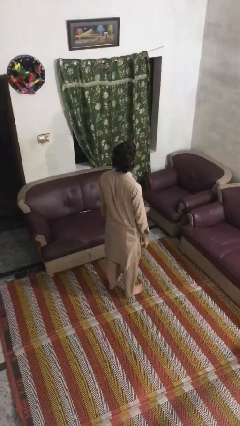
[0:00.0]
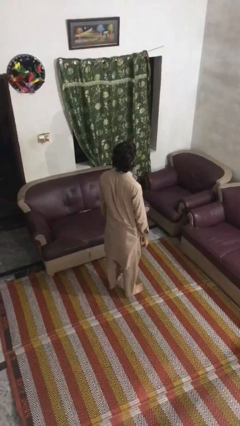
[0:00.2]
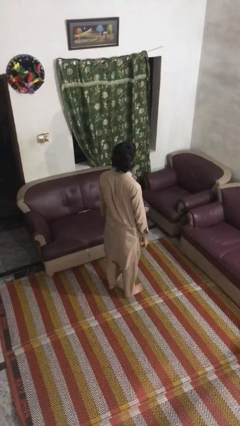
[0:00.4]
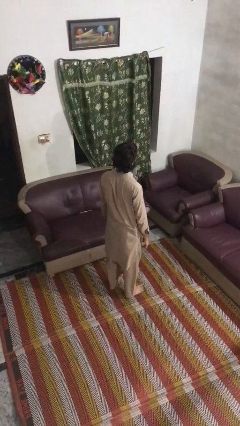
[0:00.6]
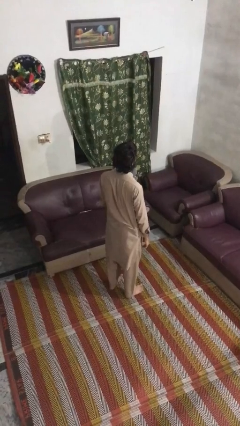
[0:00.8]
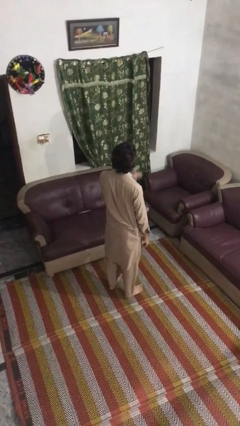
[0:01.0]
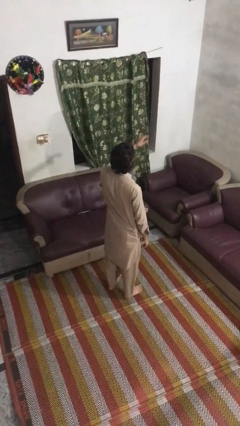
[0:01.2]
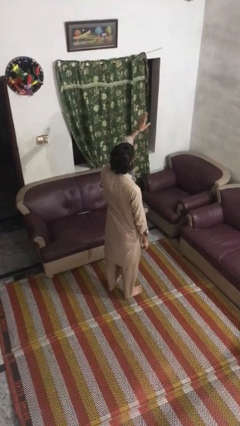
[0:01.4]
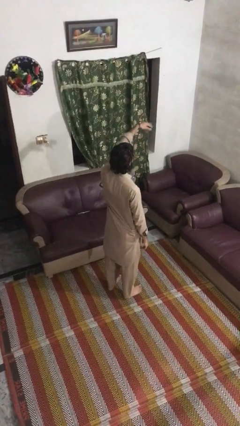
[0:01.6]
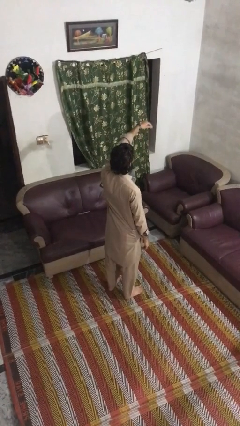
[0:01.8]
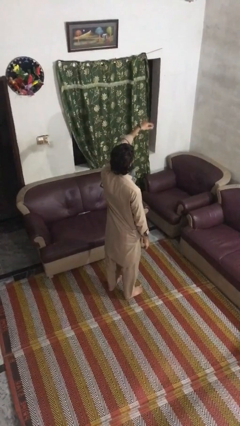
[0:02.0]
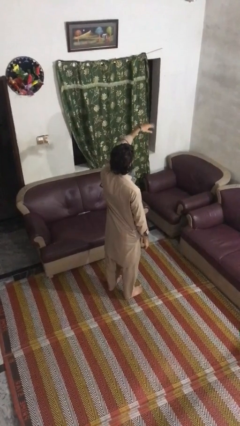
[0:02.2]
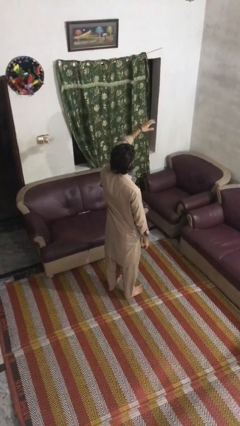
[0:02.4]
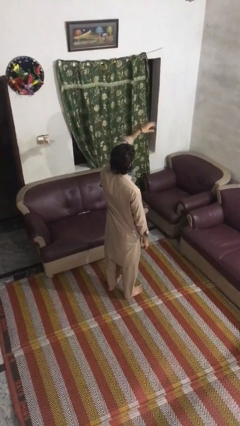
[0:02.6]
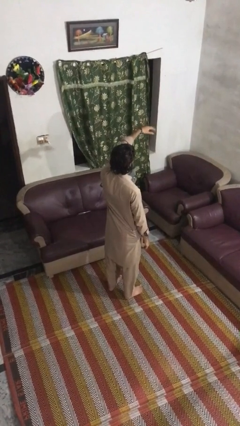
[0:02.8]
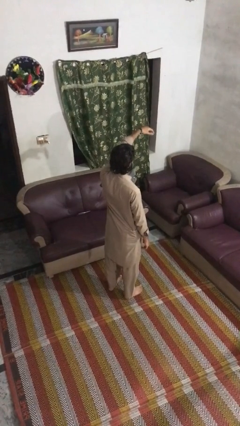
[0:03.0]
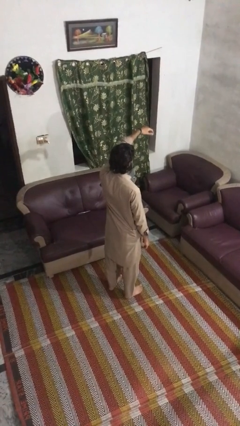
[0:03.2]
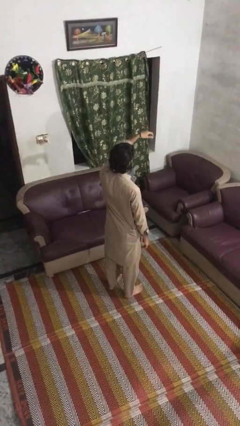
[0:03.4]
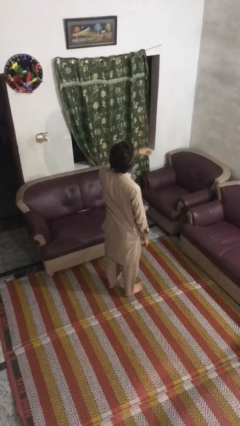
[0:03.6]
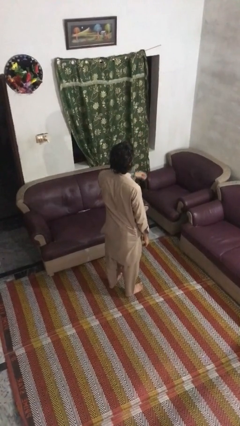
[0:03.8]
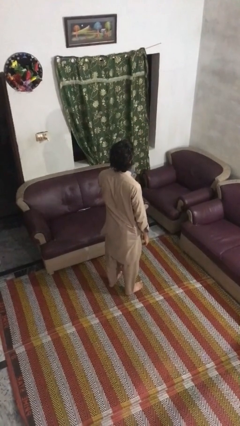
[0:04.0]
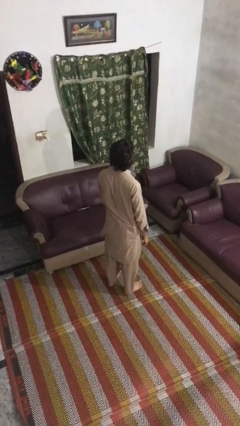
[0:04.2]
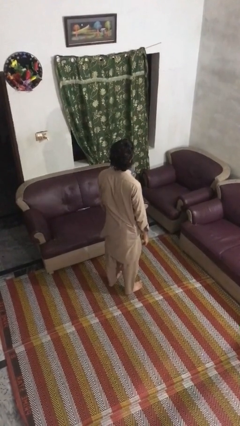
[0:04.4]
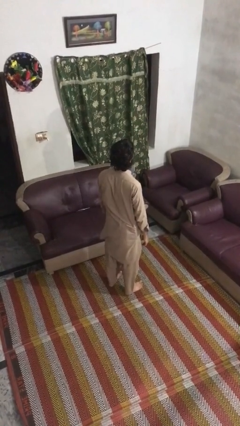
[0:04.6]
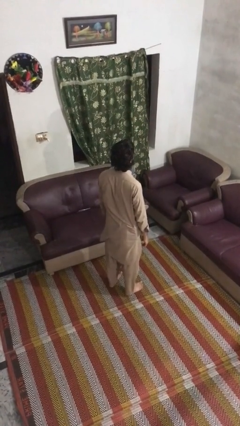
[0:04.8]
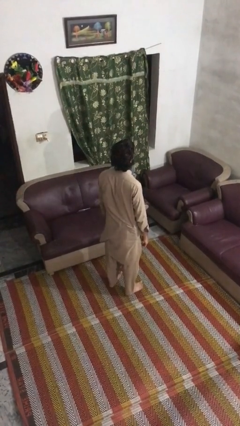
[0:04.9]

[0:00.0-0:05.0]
person gestures come here

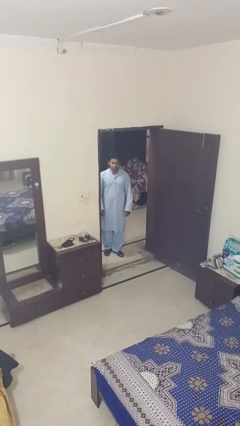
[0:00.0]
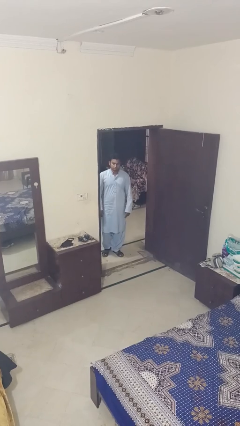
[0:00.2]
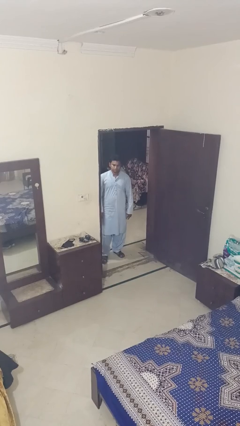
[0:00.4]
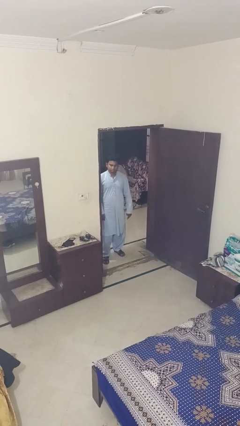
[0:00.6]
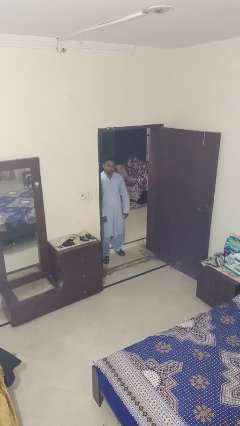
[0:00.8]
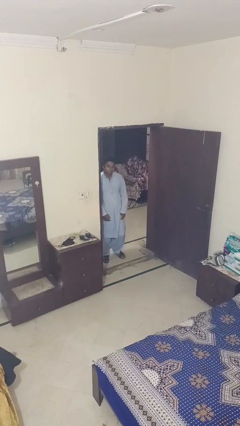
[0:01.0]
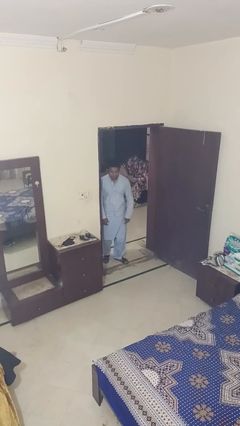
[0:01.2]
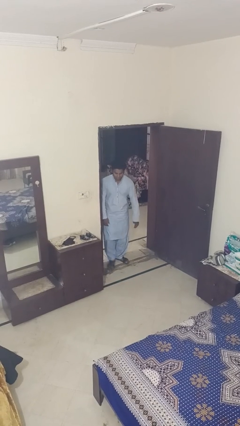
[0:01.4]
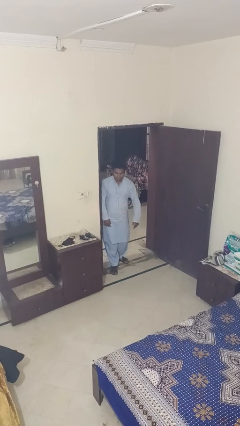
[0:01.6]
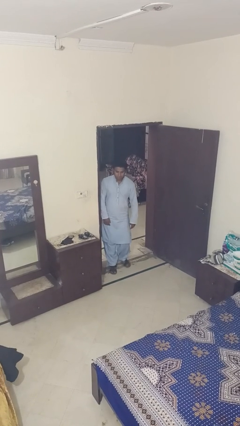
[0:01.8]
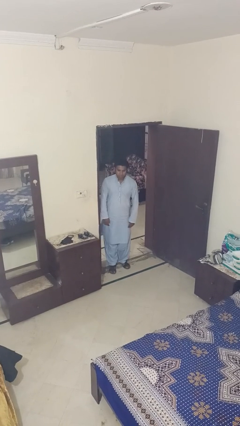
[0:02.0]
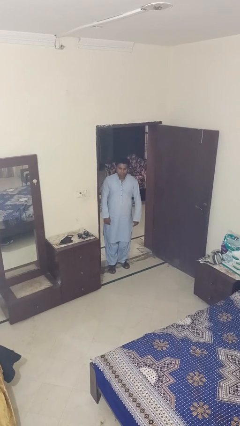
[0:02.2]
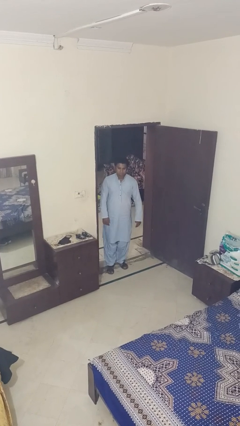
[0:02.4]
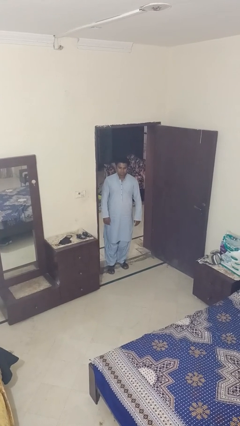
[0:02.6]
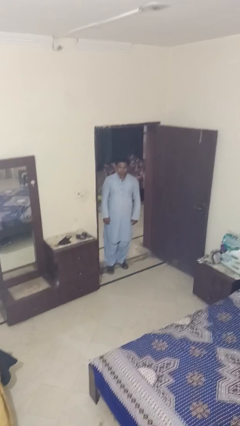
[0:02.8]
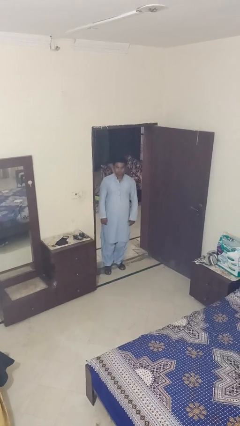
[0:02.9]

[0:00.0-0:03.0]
person bumps into wall

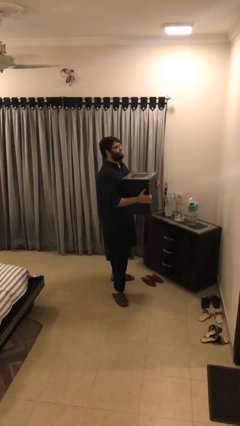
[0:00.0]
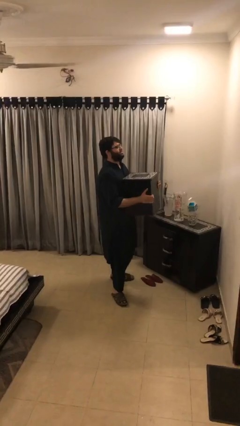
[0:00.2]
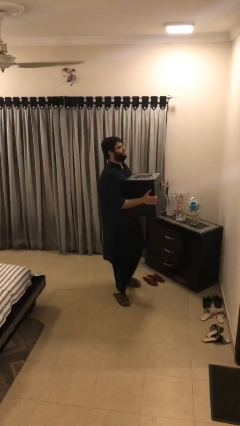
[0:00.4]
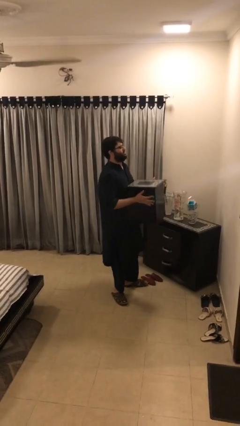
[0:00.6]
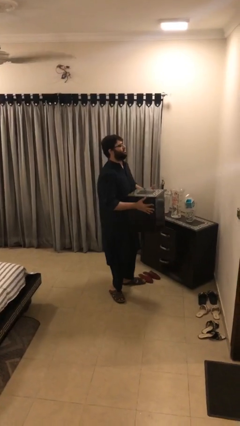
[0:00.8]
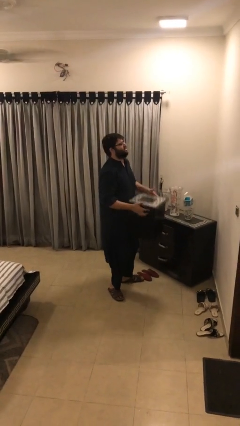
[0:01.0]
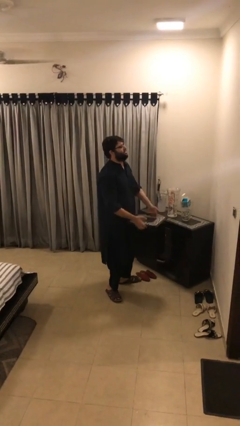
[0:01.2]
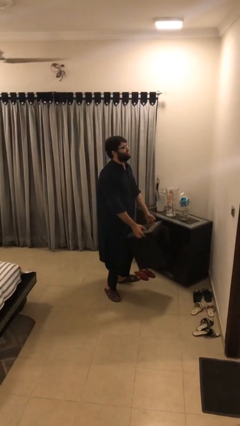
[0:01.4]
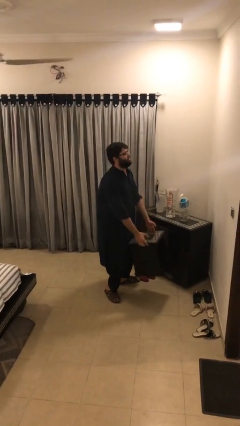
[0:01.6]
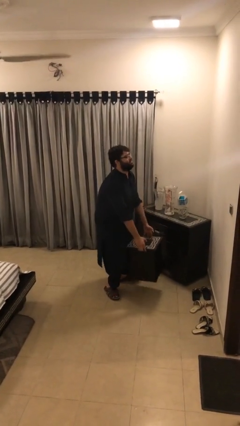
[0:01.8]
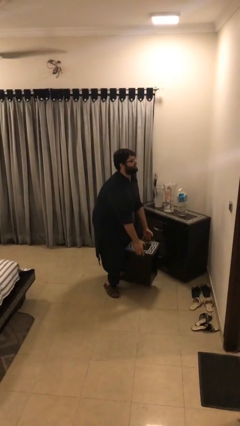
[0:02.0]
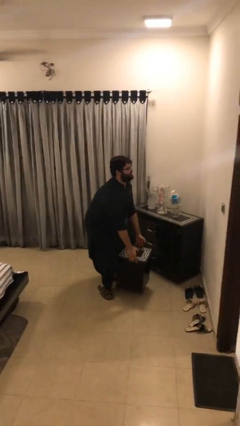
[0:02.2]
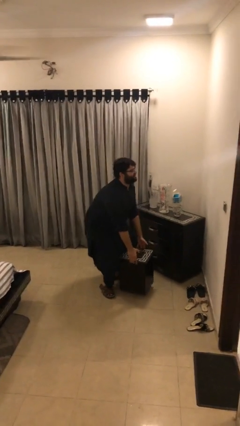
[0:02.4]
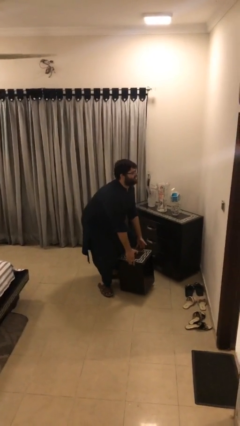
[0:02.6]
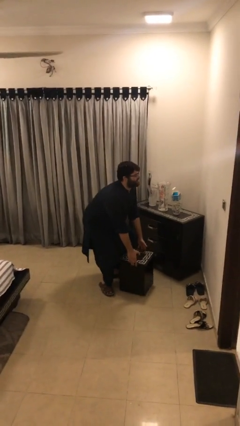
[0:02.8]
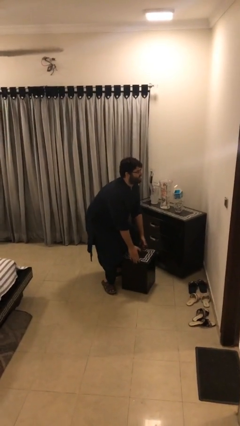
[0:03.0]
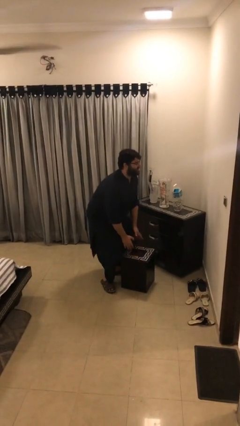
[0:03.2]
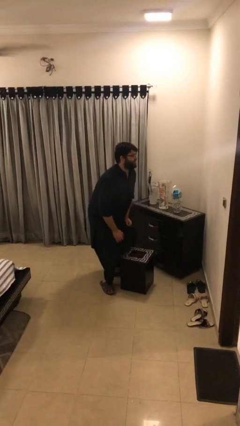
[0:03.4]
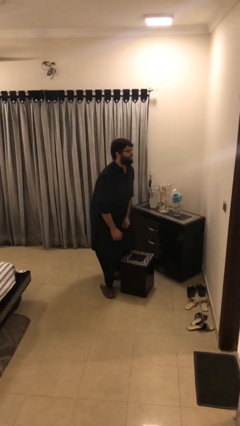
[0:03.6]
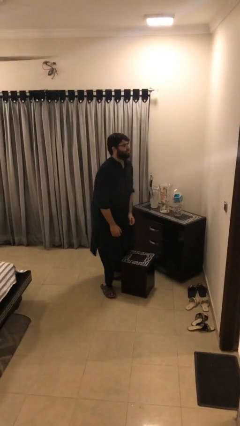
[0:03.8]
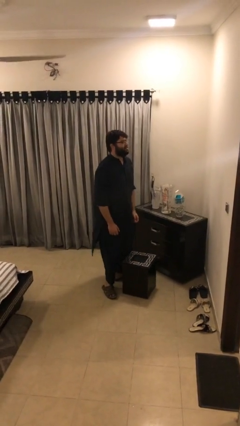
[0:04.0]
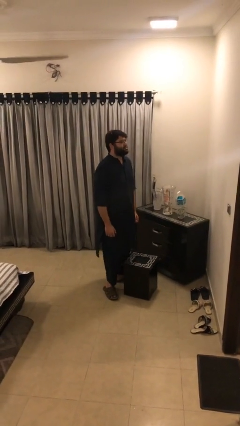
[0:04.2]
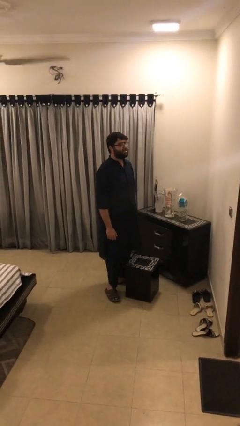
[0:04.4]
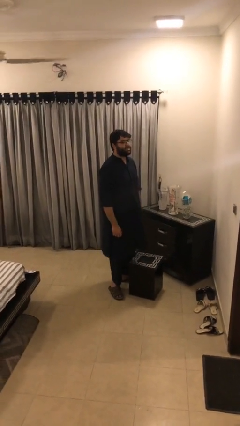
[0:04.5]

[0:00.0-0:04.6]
person puts down object on floor

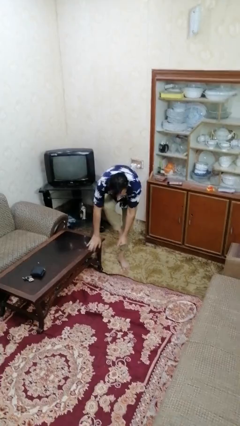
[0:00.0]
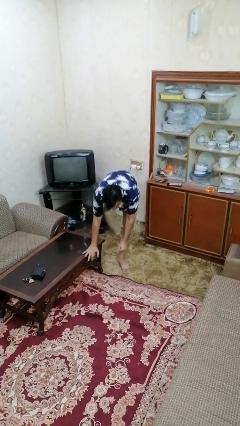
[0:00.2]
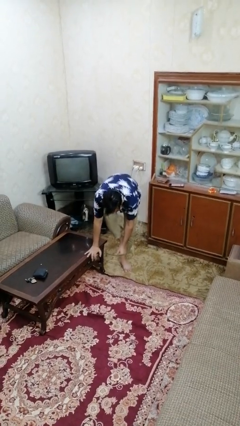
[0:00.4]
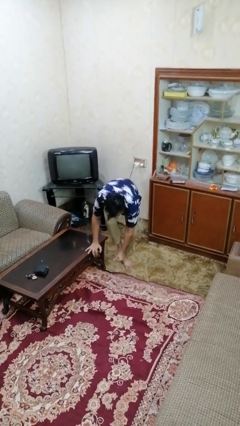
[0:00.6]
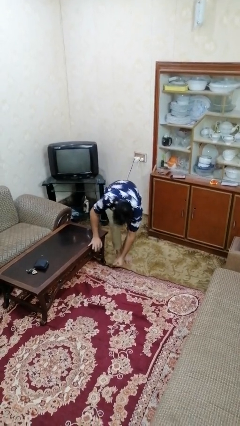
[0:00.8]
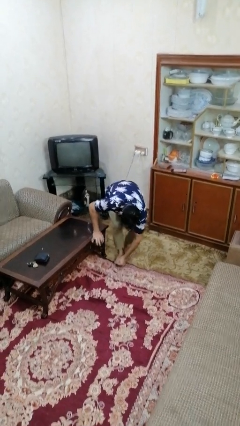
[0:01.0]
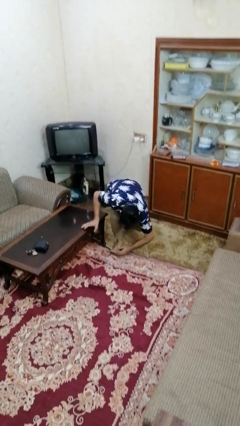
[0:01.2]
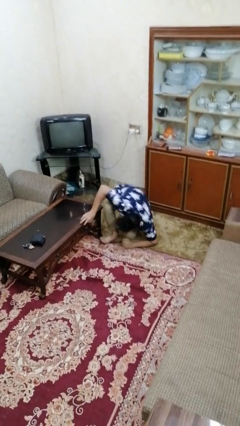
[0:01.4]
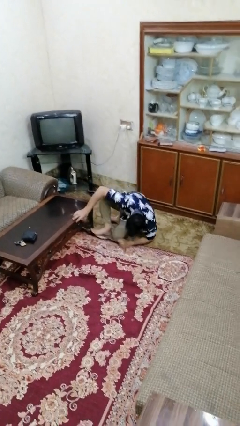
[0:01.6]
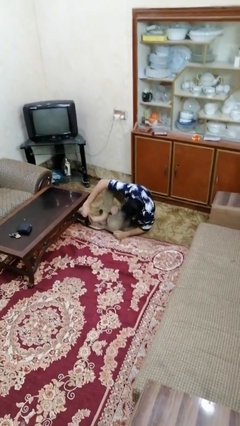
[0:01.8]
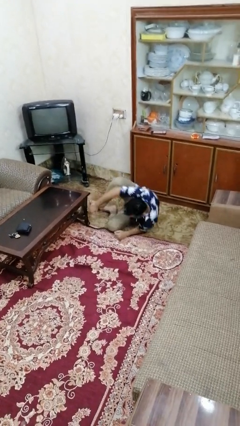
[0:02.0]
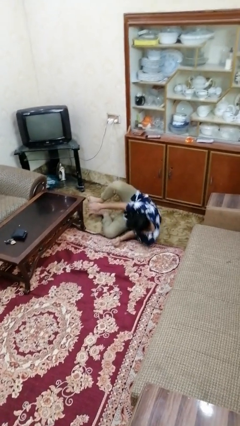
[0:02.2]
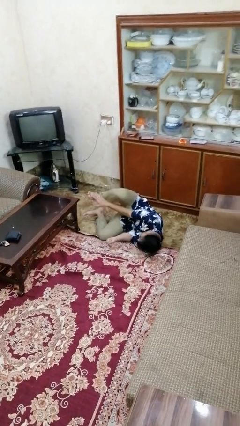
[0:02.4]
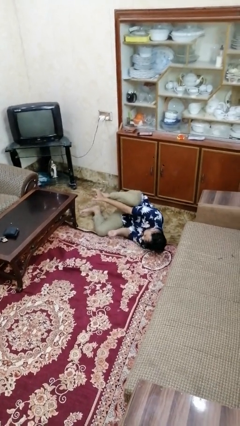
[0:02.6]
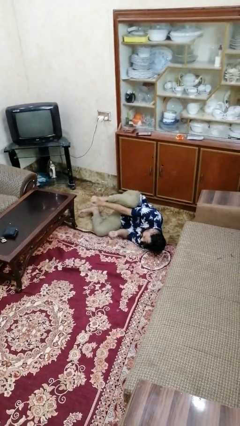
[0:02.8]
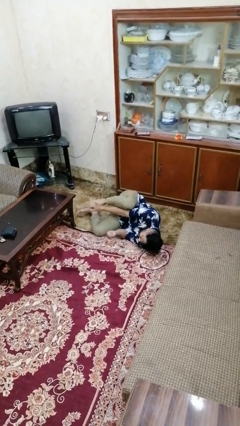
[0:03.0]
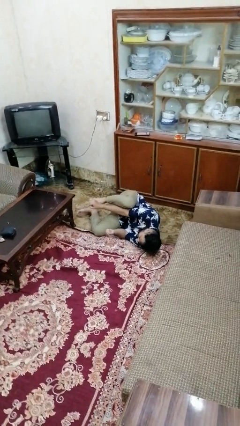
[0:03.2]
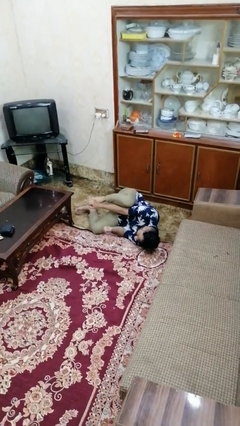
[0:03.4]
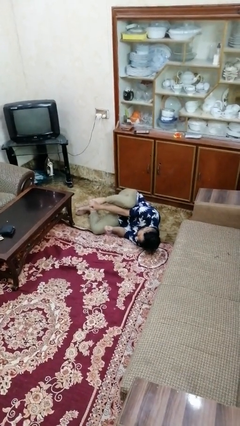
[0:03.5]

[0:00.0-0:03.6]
person lies down on floor

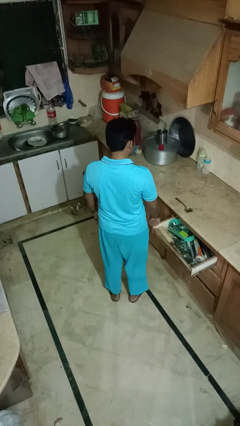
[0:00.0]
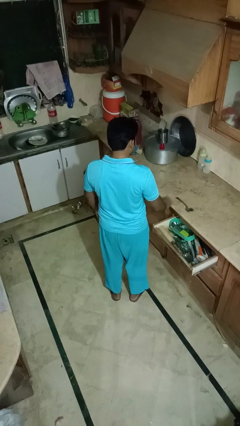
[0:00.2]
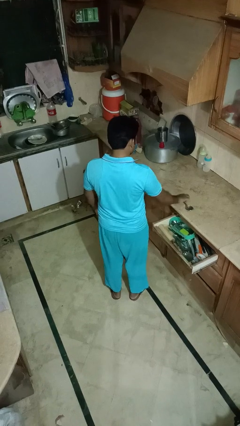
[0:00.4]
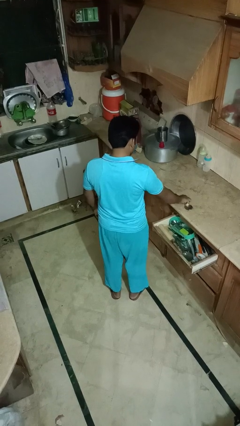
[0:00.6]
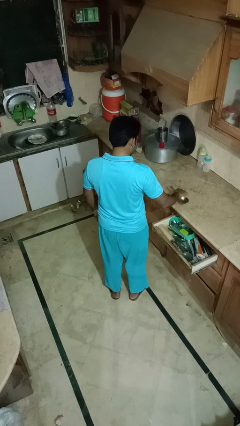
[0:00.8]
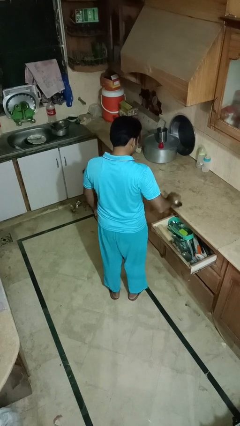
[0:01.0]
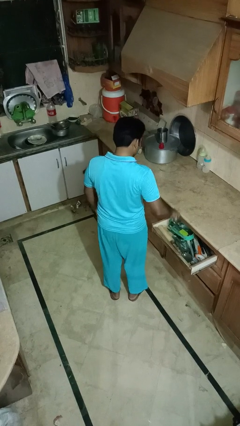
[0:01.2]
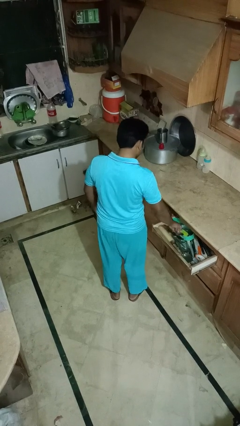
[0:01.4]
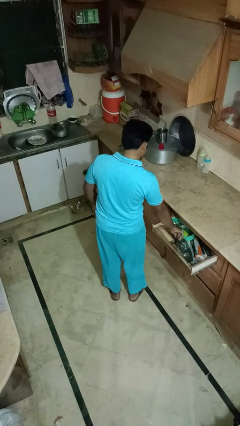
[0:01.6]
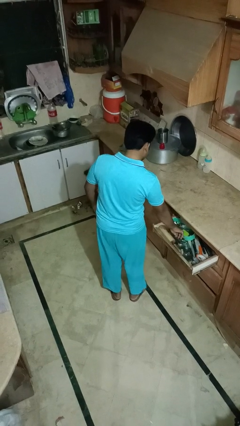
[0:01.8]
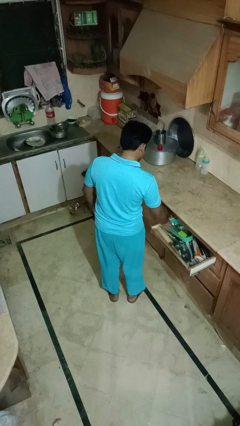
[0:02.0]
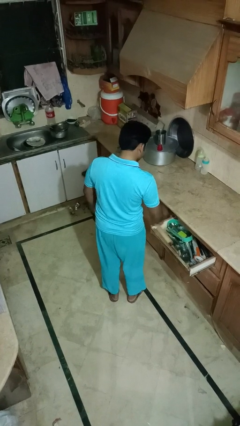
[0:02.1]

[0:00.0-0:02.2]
person puts object into kitchen drawer
